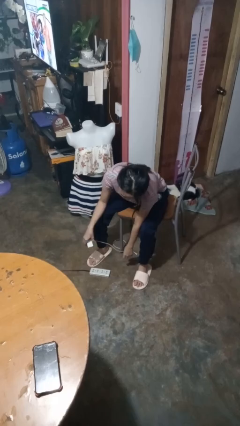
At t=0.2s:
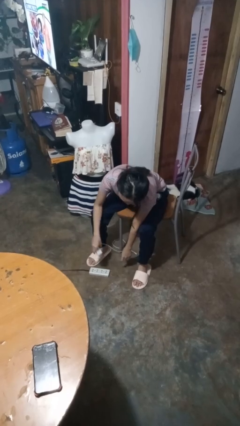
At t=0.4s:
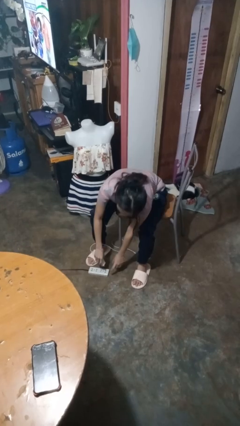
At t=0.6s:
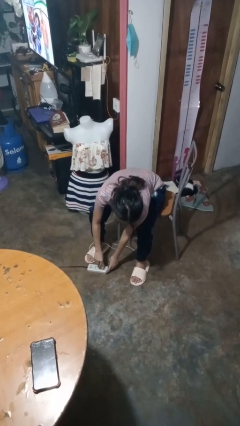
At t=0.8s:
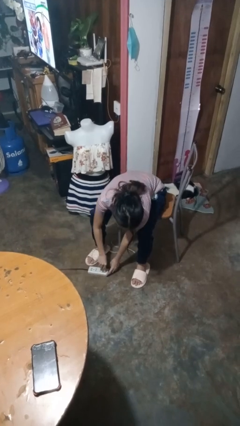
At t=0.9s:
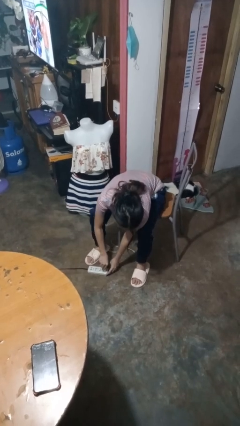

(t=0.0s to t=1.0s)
person plugs into electrical socket

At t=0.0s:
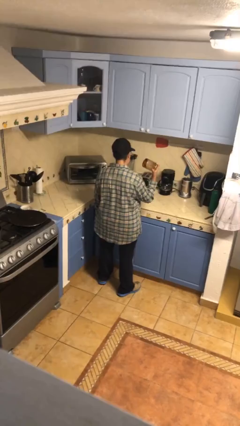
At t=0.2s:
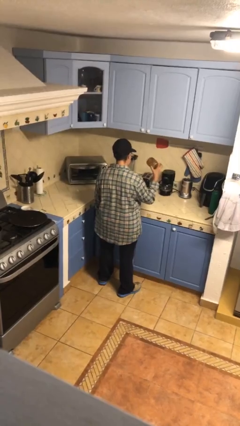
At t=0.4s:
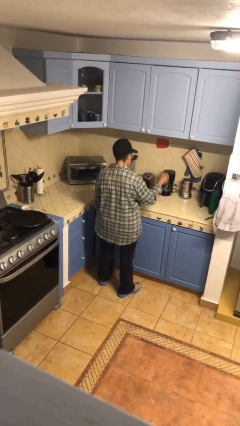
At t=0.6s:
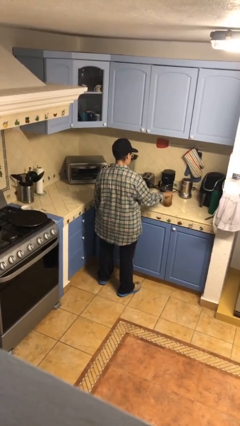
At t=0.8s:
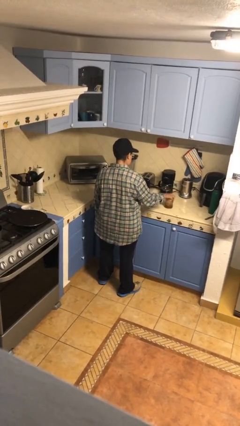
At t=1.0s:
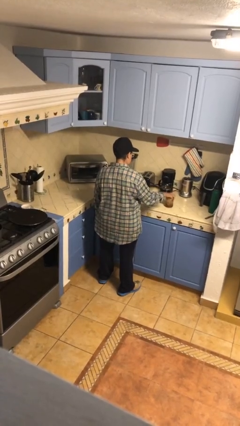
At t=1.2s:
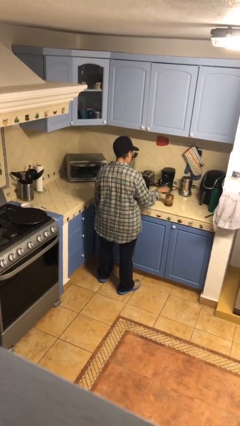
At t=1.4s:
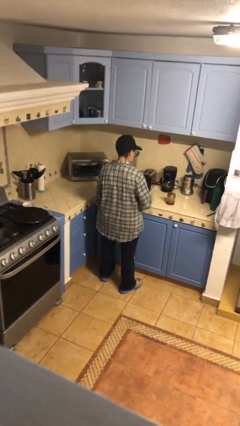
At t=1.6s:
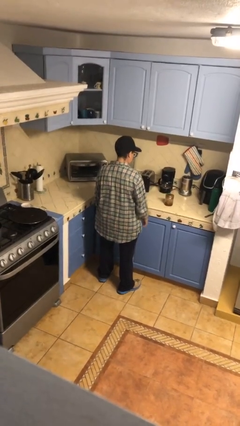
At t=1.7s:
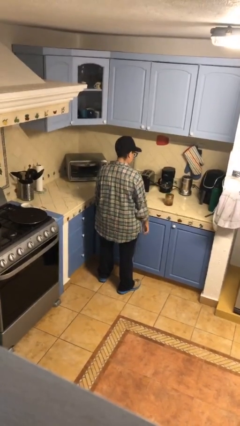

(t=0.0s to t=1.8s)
person puts down object on countertop

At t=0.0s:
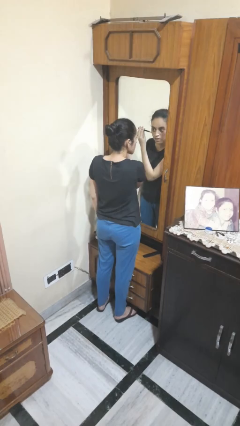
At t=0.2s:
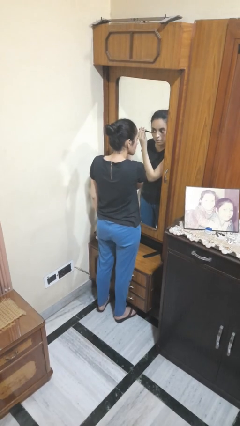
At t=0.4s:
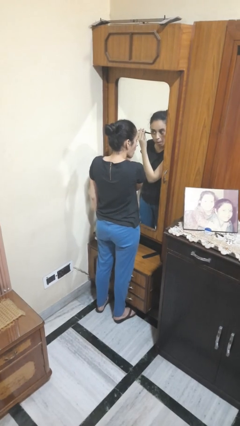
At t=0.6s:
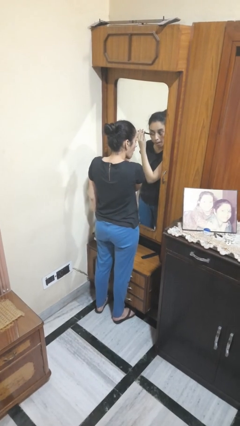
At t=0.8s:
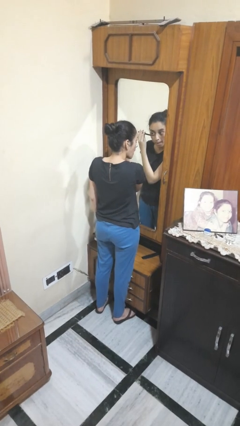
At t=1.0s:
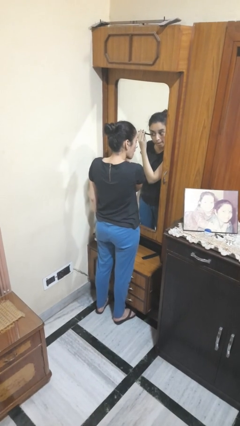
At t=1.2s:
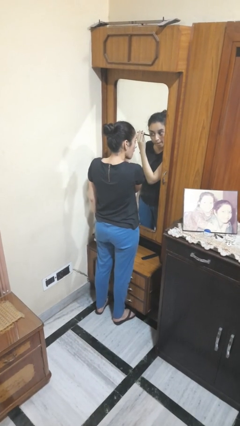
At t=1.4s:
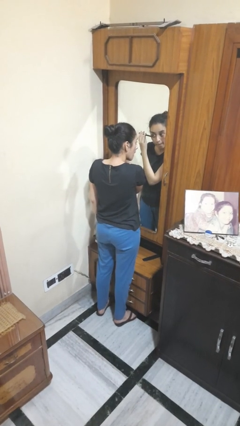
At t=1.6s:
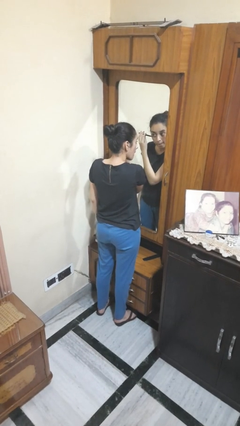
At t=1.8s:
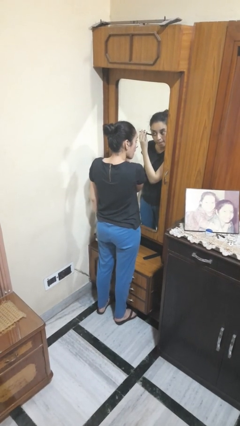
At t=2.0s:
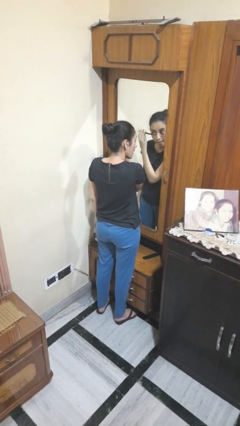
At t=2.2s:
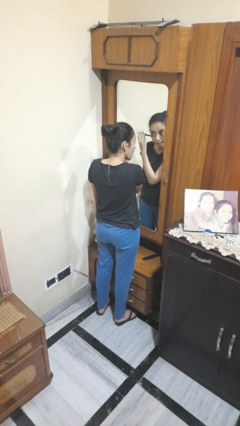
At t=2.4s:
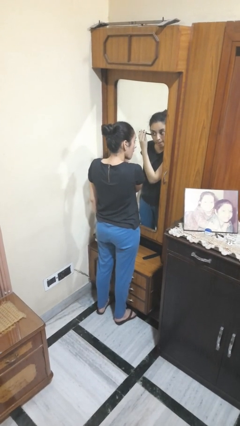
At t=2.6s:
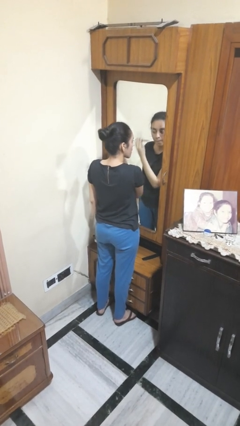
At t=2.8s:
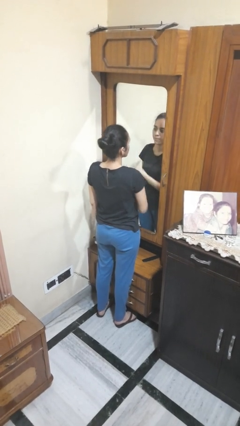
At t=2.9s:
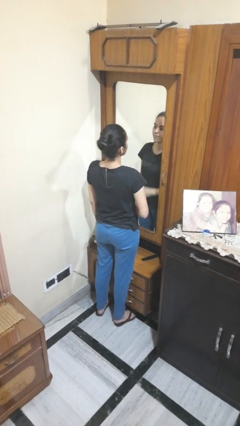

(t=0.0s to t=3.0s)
person applies eye makeup

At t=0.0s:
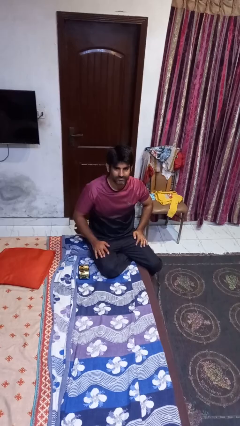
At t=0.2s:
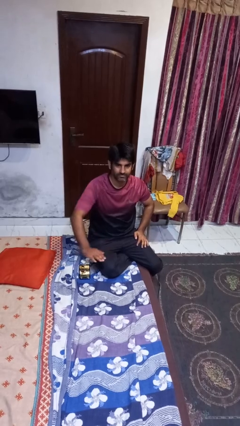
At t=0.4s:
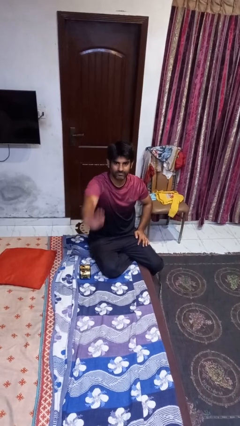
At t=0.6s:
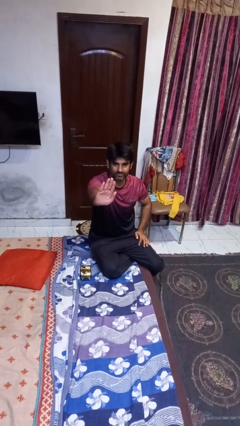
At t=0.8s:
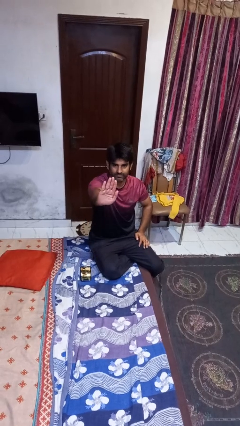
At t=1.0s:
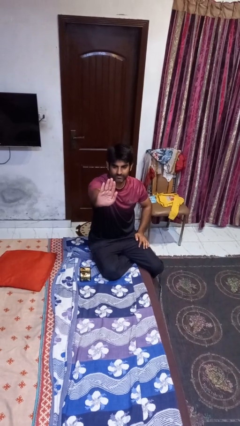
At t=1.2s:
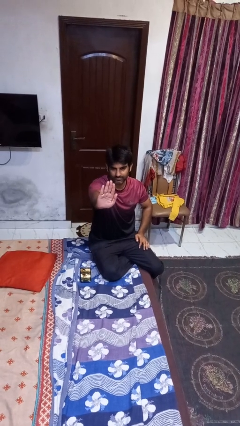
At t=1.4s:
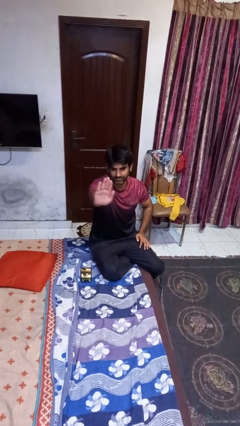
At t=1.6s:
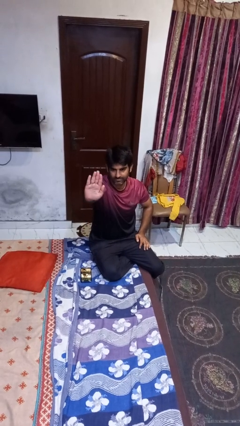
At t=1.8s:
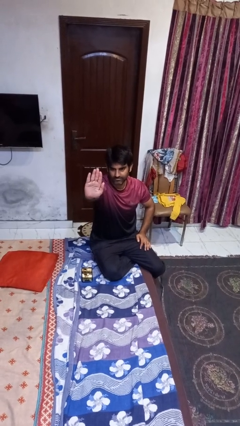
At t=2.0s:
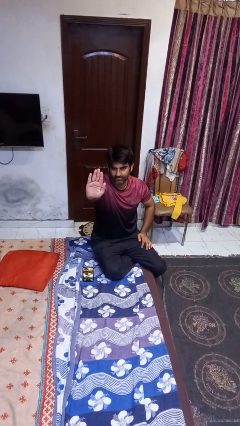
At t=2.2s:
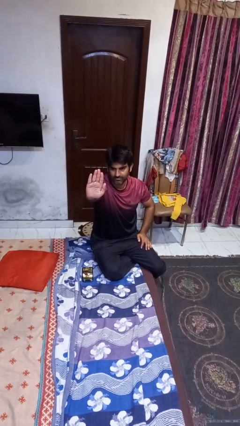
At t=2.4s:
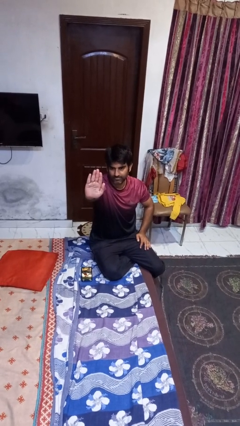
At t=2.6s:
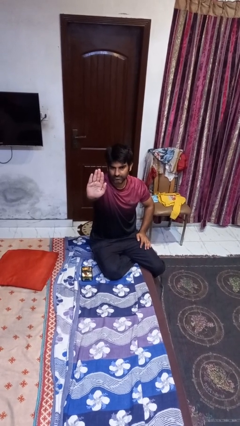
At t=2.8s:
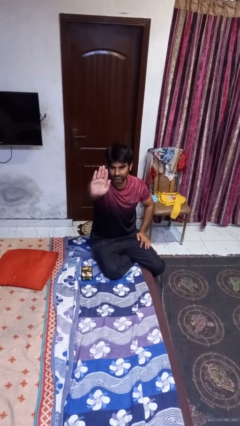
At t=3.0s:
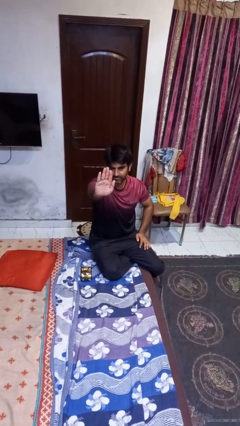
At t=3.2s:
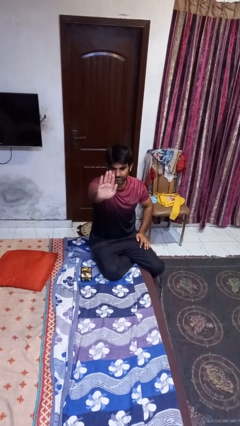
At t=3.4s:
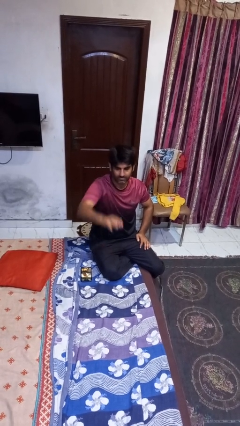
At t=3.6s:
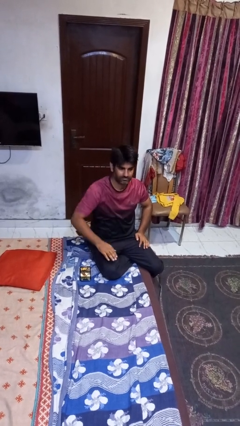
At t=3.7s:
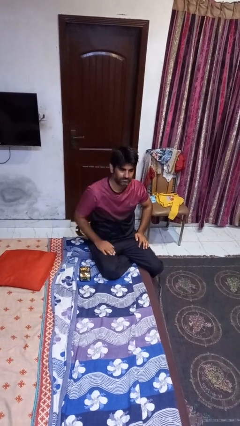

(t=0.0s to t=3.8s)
person gestures stop

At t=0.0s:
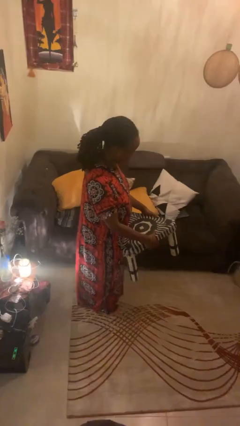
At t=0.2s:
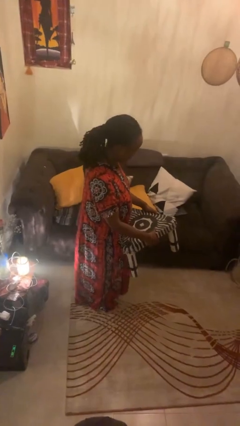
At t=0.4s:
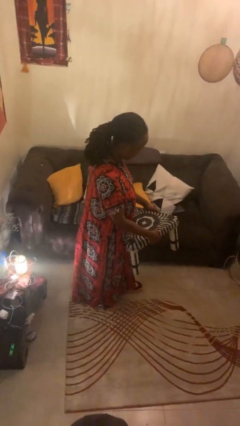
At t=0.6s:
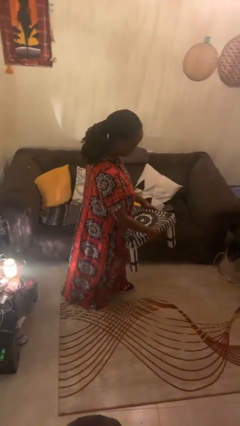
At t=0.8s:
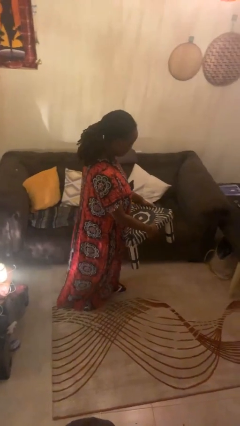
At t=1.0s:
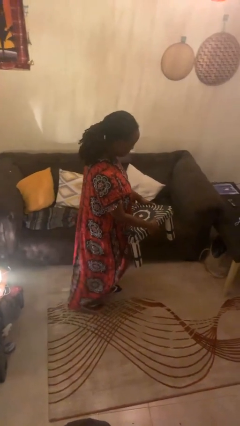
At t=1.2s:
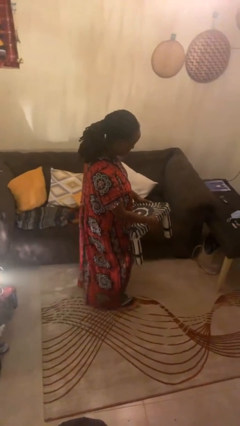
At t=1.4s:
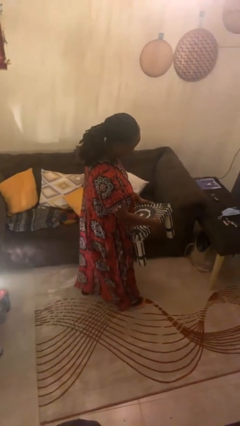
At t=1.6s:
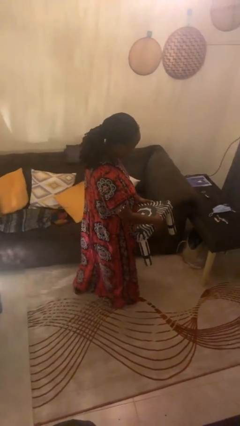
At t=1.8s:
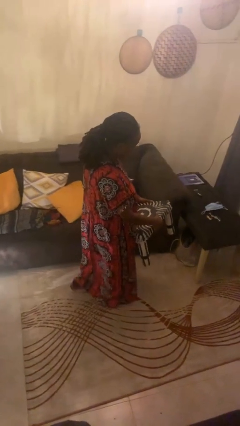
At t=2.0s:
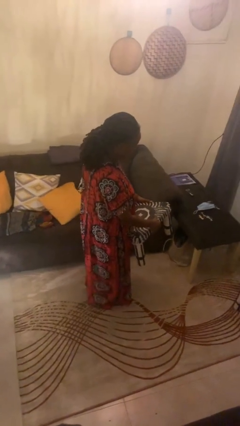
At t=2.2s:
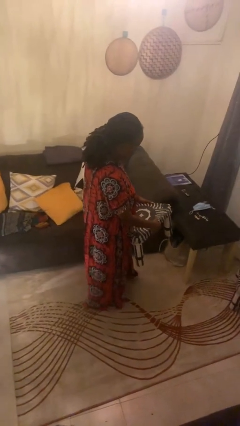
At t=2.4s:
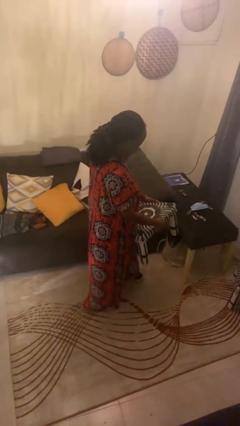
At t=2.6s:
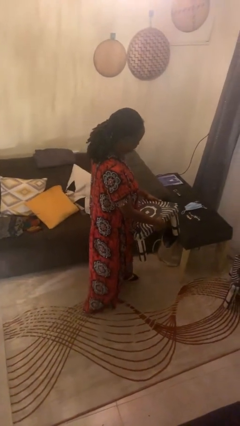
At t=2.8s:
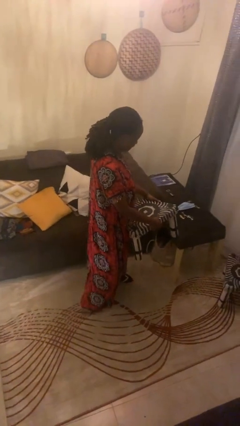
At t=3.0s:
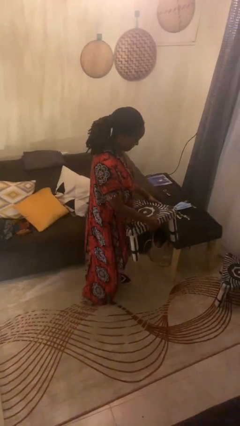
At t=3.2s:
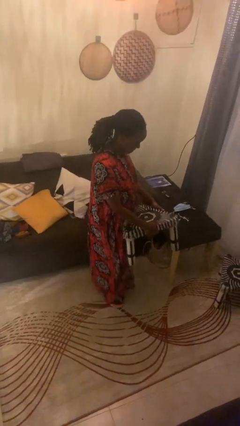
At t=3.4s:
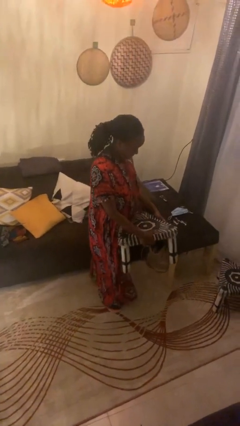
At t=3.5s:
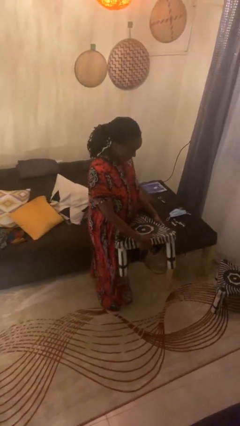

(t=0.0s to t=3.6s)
person carries furniture

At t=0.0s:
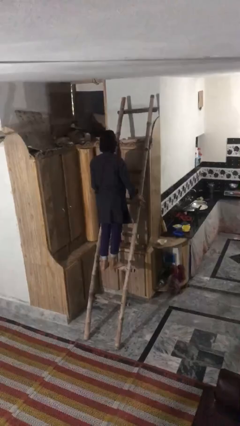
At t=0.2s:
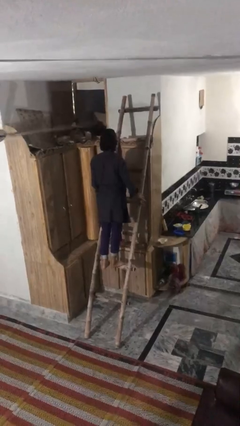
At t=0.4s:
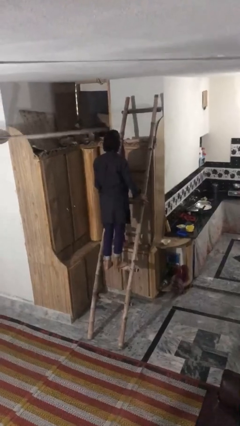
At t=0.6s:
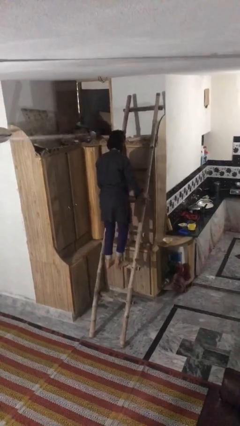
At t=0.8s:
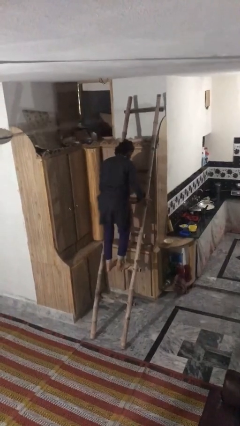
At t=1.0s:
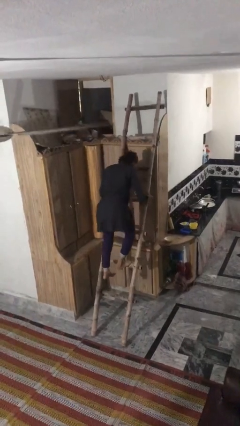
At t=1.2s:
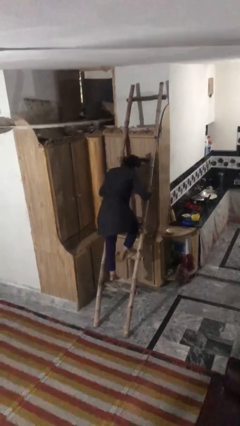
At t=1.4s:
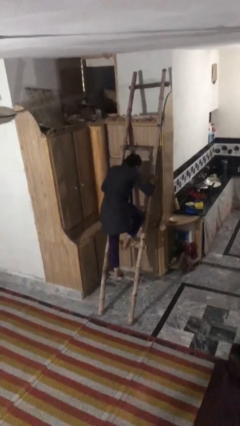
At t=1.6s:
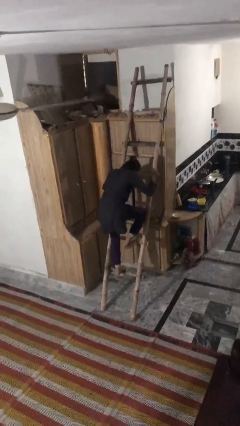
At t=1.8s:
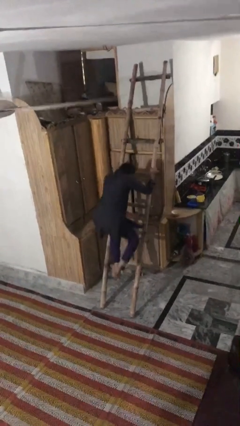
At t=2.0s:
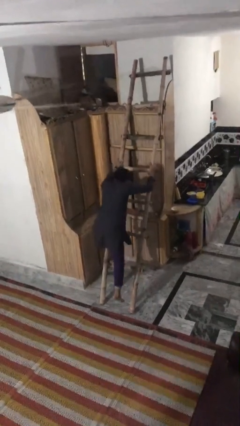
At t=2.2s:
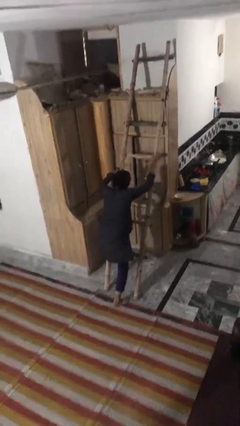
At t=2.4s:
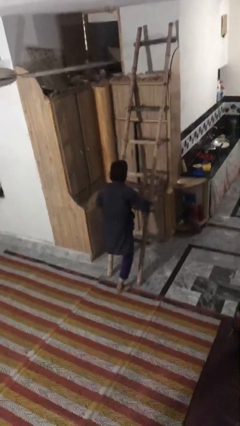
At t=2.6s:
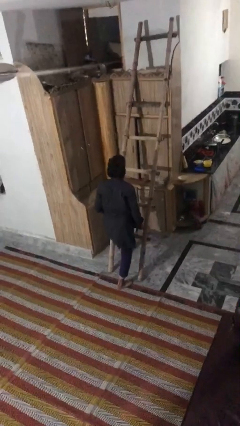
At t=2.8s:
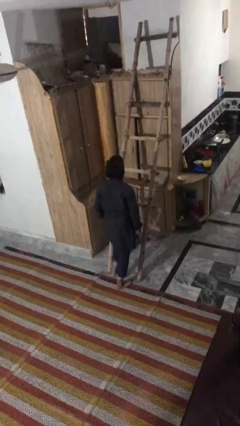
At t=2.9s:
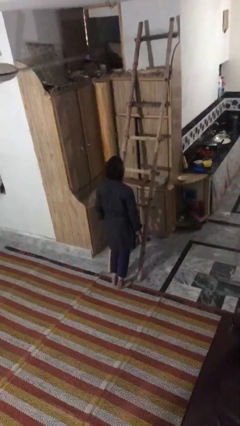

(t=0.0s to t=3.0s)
person climbs down ladder

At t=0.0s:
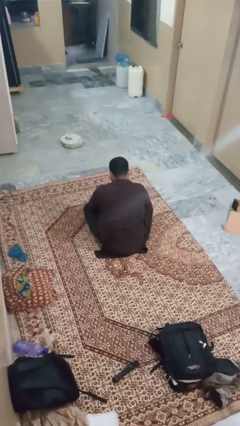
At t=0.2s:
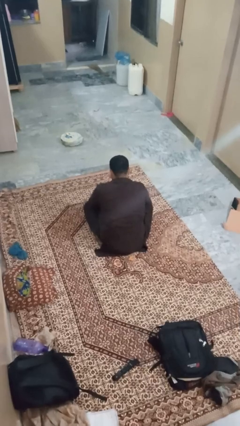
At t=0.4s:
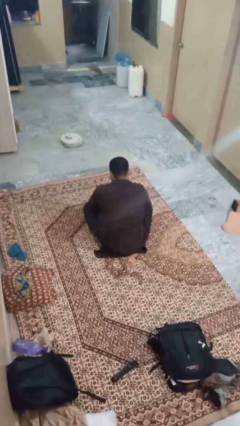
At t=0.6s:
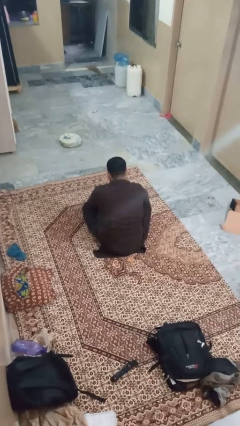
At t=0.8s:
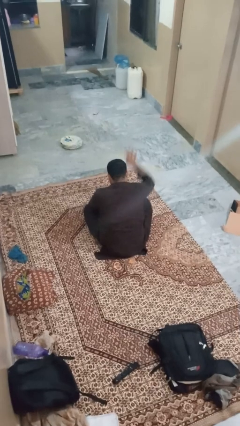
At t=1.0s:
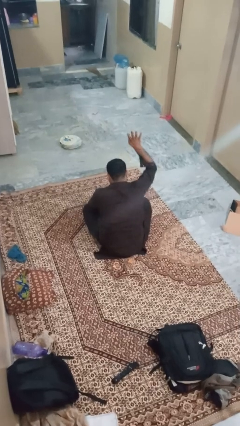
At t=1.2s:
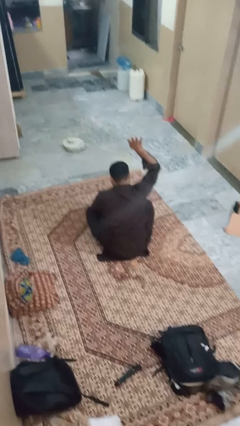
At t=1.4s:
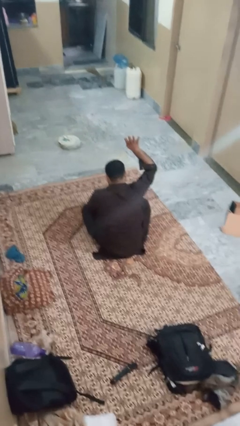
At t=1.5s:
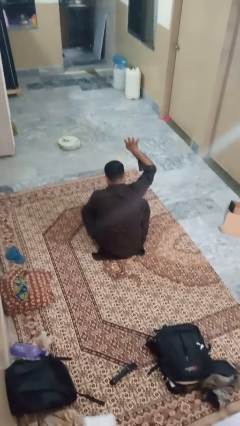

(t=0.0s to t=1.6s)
person gestures number four
